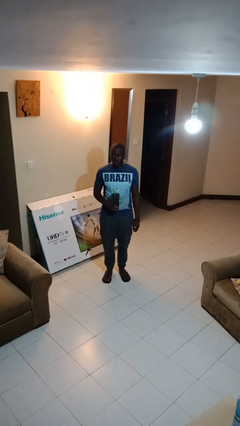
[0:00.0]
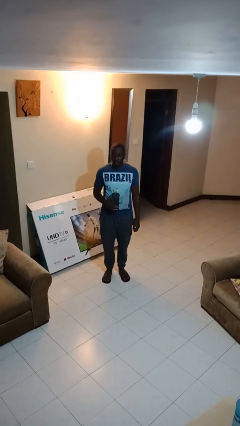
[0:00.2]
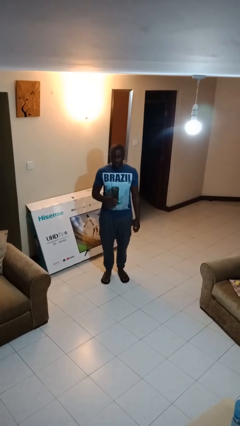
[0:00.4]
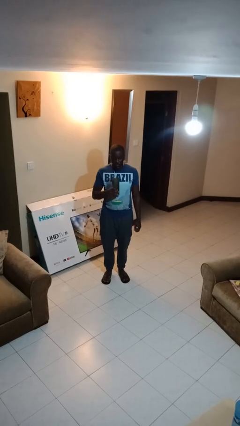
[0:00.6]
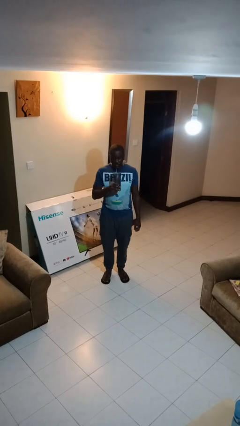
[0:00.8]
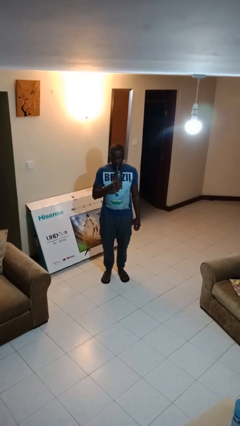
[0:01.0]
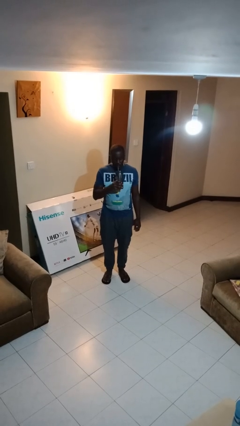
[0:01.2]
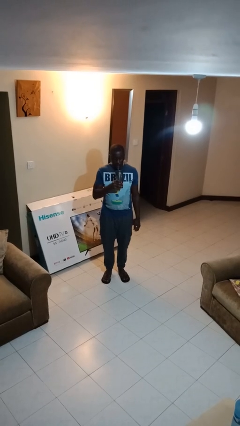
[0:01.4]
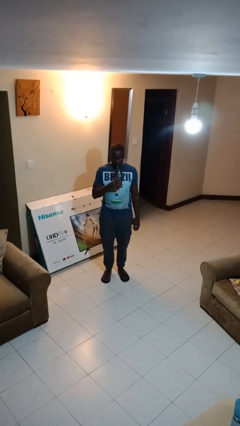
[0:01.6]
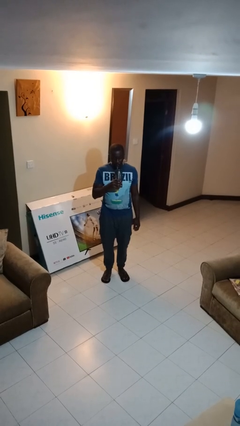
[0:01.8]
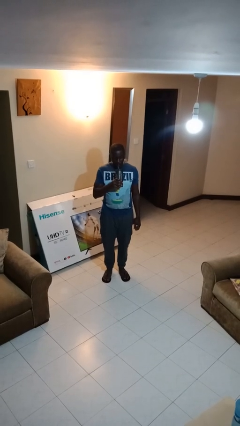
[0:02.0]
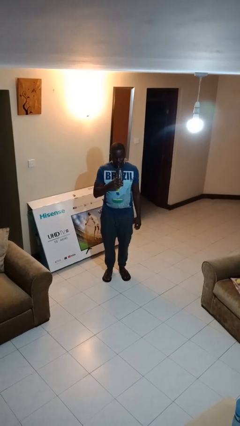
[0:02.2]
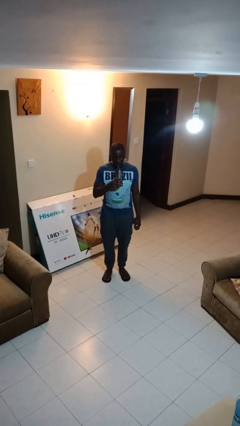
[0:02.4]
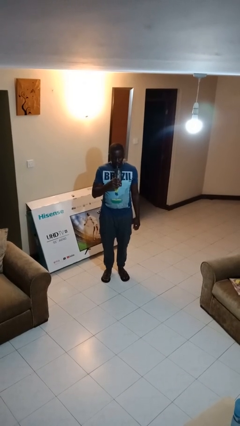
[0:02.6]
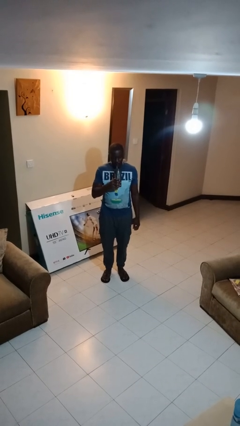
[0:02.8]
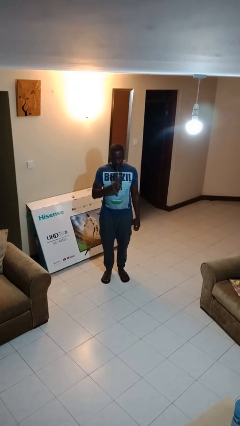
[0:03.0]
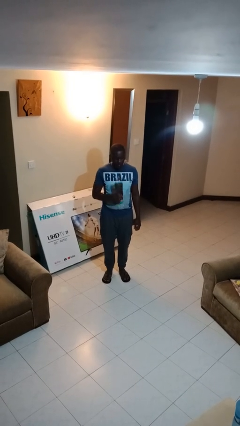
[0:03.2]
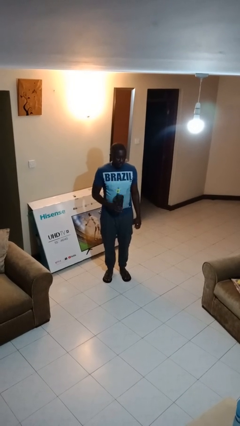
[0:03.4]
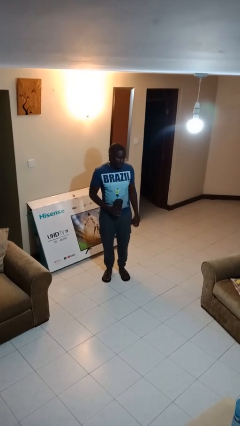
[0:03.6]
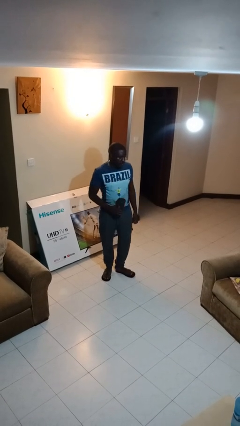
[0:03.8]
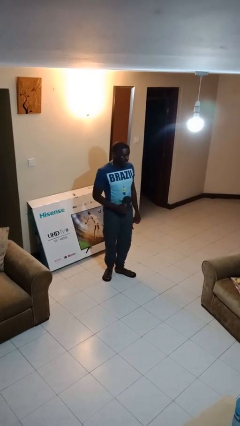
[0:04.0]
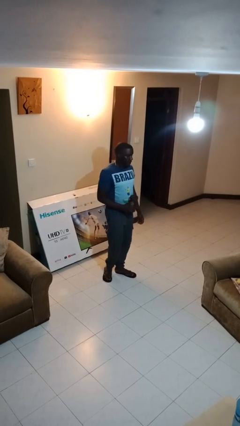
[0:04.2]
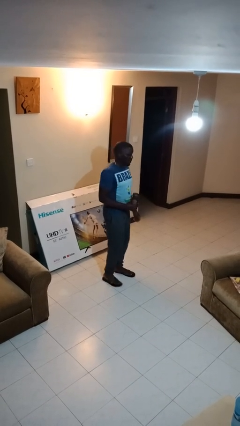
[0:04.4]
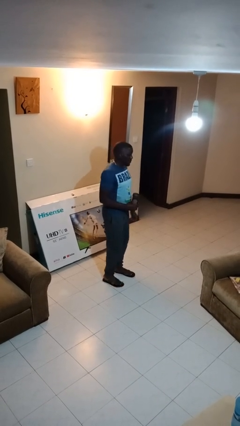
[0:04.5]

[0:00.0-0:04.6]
person drinks from straw

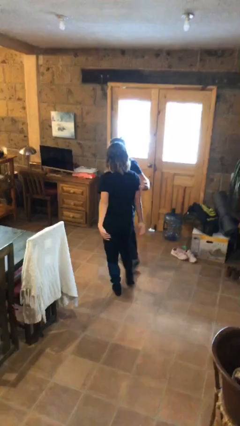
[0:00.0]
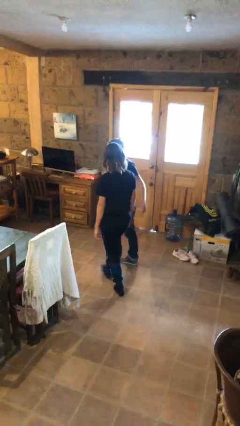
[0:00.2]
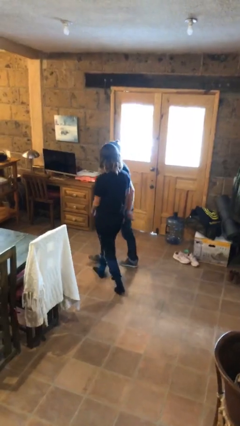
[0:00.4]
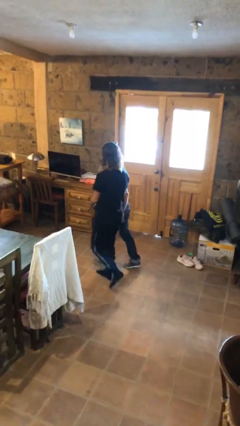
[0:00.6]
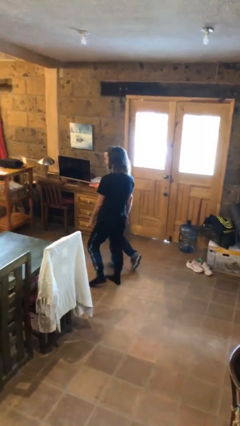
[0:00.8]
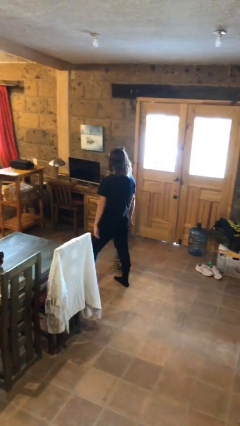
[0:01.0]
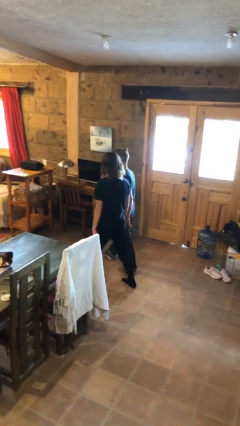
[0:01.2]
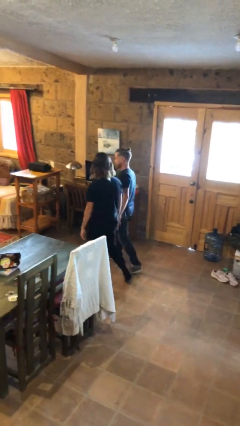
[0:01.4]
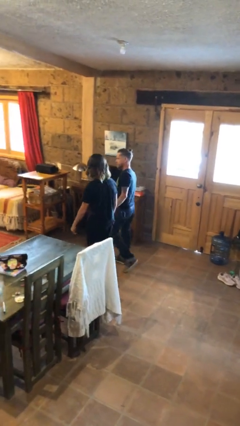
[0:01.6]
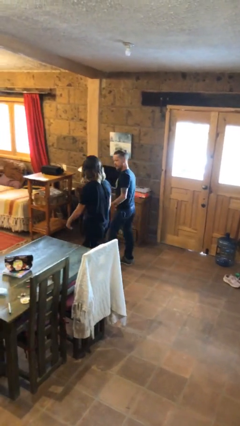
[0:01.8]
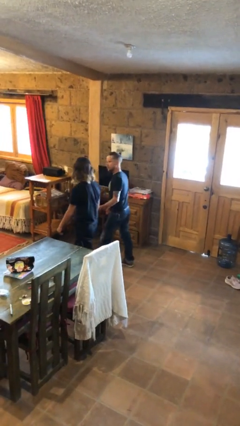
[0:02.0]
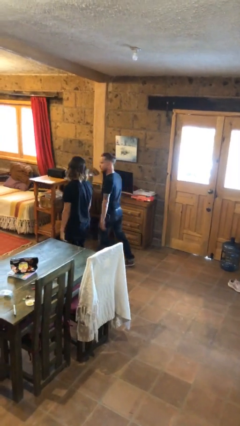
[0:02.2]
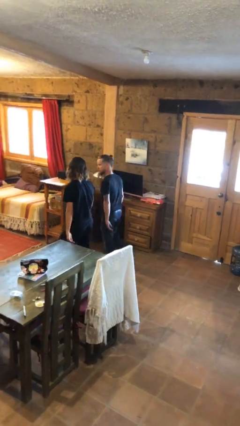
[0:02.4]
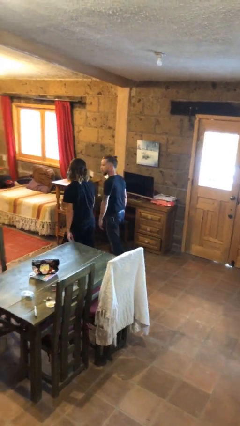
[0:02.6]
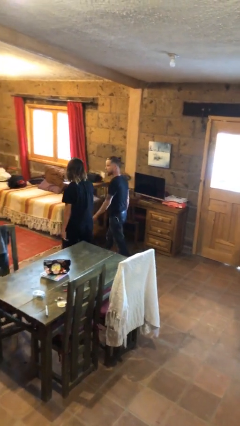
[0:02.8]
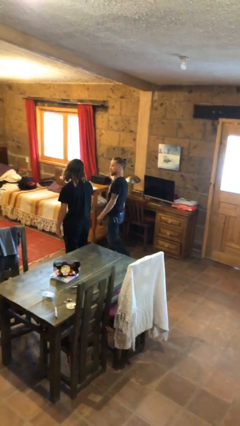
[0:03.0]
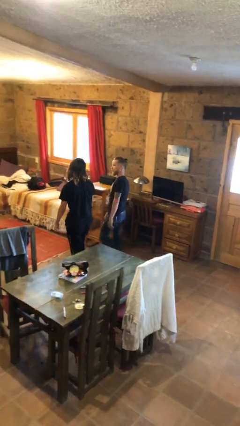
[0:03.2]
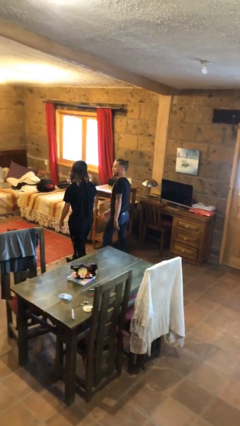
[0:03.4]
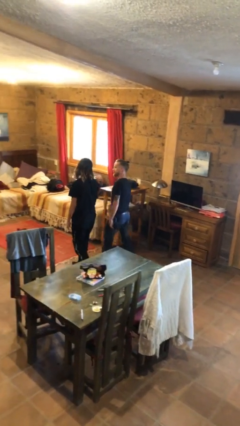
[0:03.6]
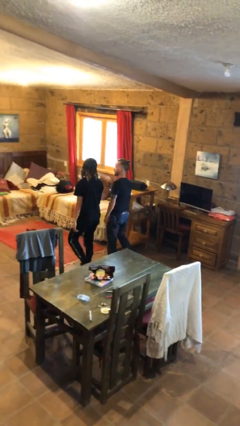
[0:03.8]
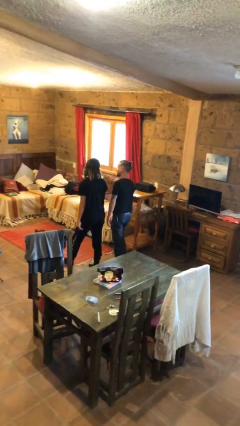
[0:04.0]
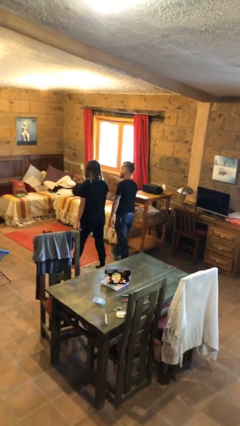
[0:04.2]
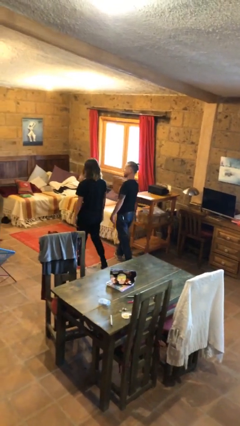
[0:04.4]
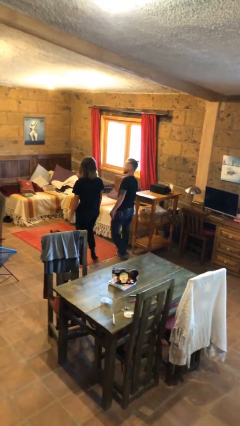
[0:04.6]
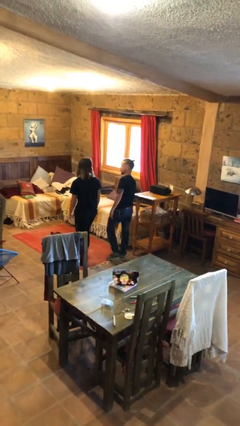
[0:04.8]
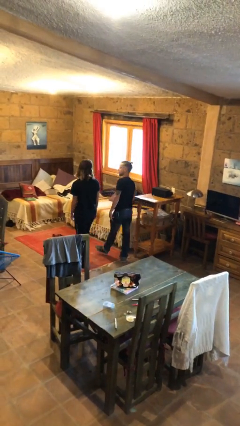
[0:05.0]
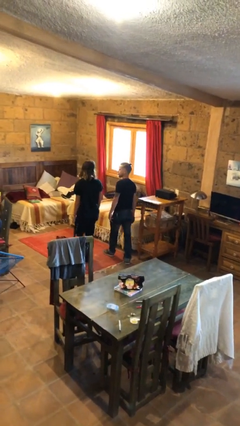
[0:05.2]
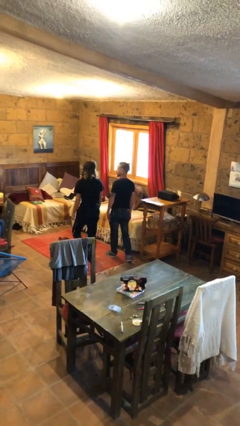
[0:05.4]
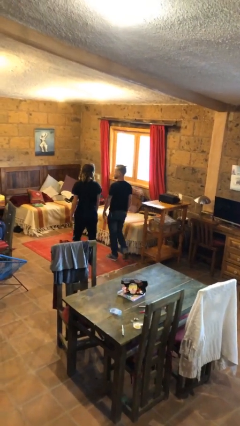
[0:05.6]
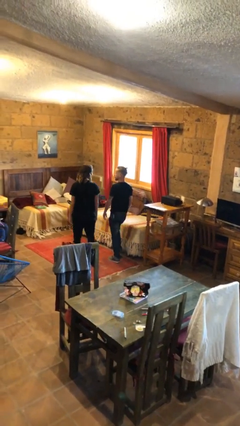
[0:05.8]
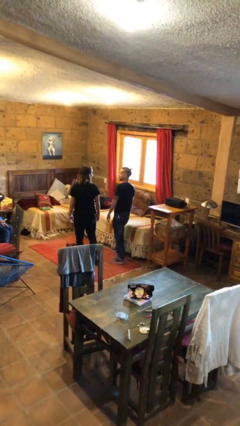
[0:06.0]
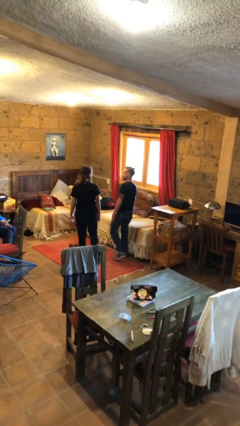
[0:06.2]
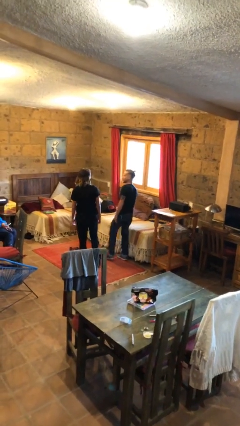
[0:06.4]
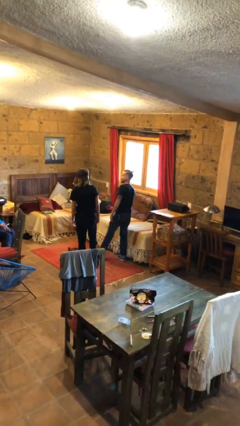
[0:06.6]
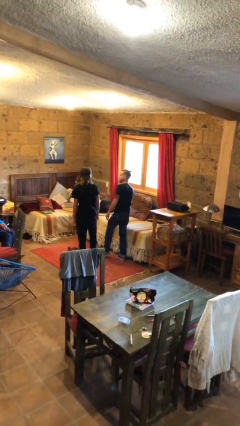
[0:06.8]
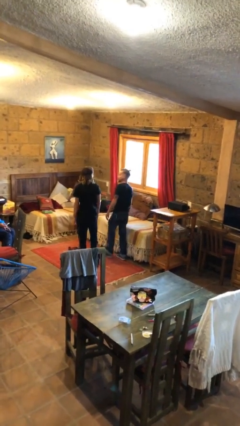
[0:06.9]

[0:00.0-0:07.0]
person talks to person

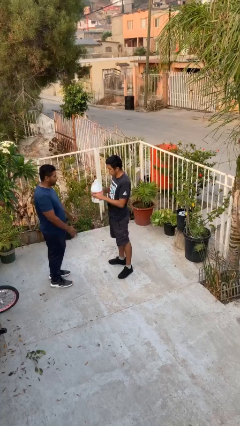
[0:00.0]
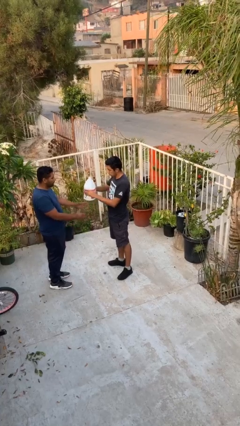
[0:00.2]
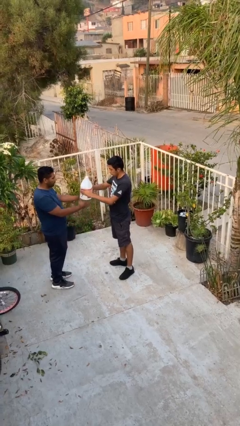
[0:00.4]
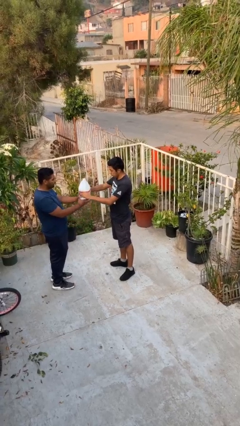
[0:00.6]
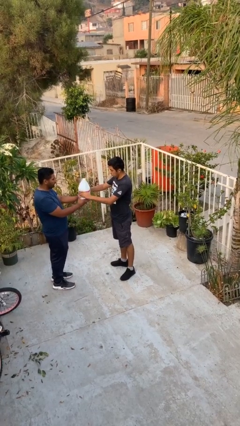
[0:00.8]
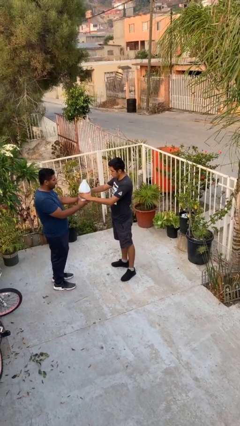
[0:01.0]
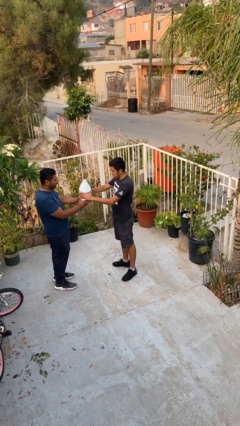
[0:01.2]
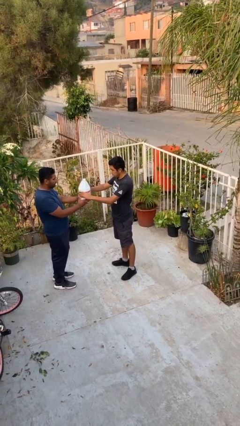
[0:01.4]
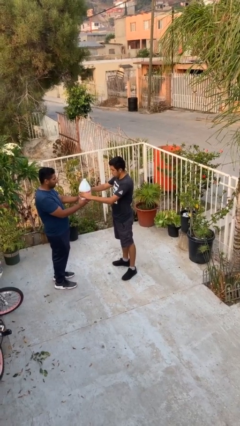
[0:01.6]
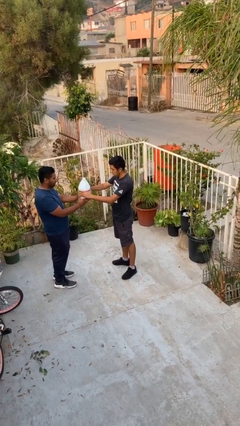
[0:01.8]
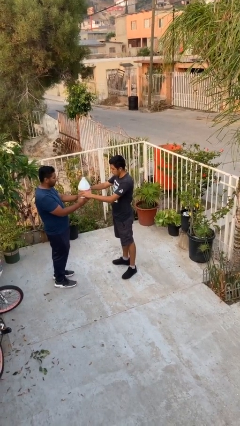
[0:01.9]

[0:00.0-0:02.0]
person transfers object to person

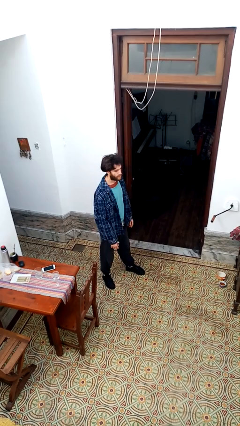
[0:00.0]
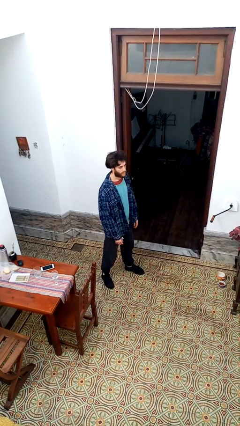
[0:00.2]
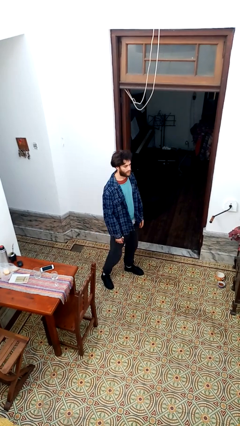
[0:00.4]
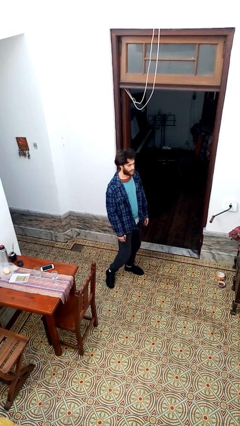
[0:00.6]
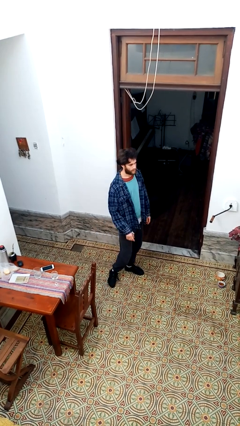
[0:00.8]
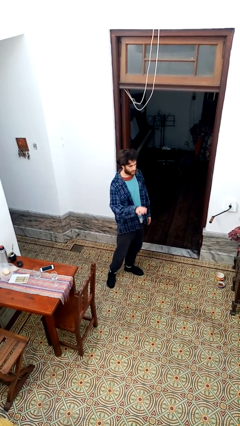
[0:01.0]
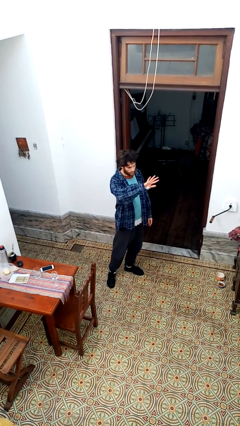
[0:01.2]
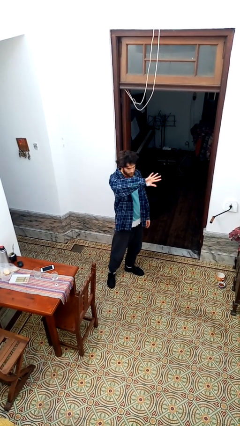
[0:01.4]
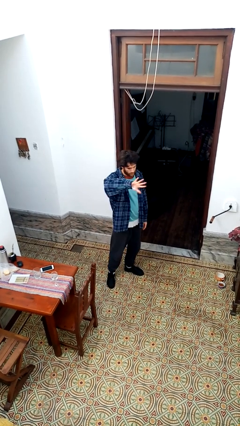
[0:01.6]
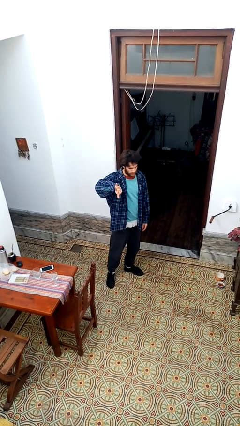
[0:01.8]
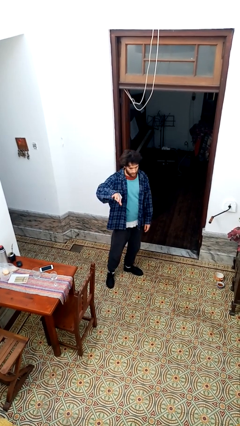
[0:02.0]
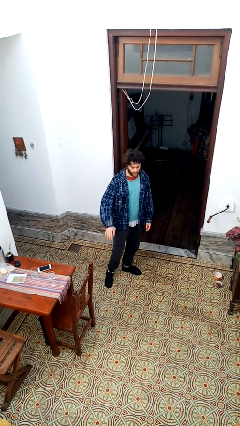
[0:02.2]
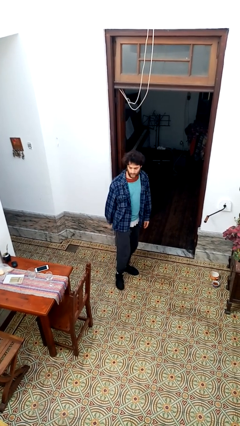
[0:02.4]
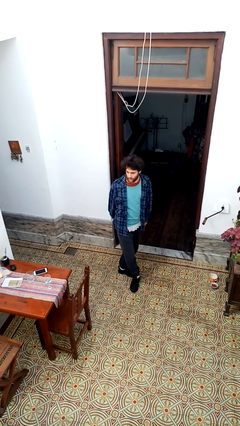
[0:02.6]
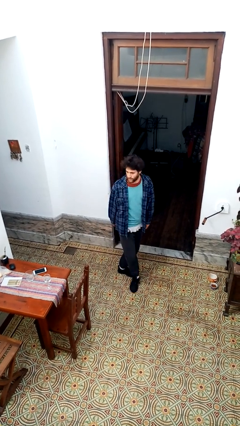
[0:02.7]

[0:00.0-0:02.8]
person gestures swipe right

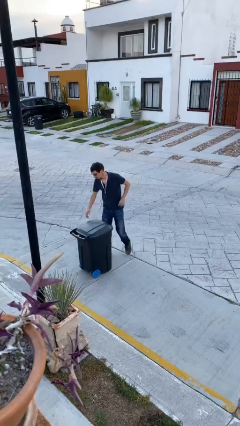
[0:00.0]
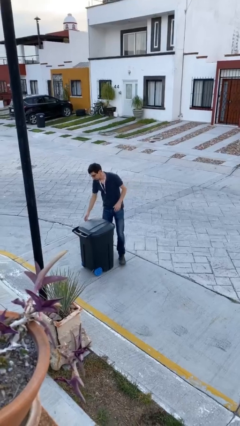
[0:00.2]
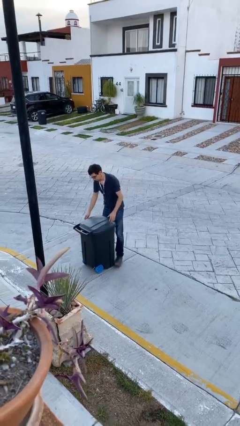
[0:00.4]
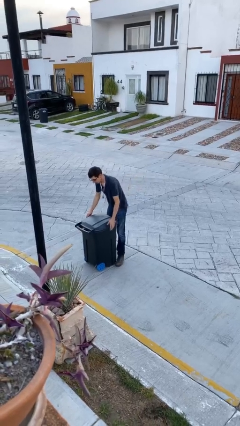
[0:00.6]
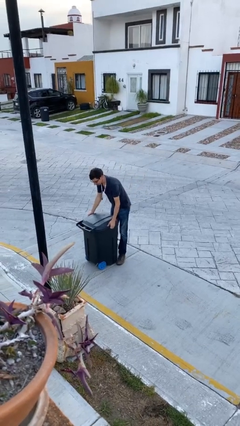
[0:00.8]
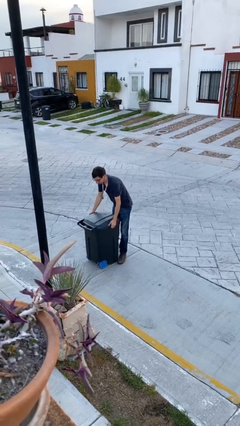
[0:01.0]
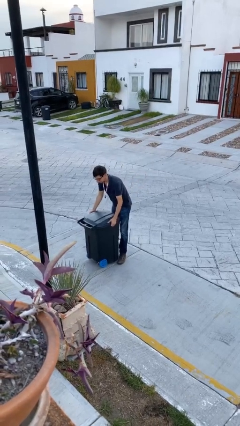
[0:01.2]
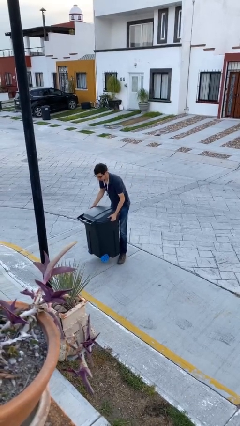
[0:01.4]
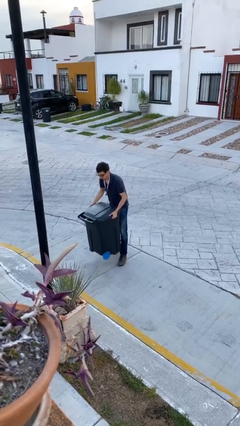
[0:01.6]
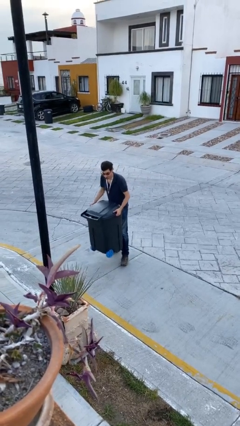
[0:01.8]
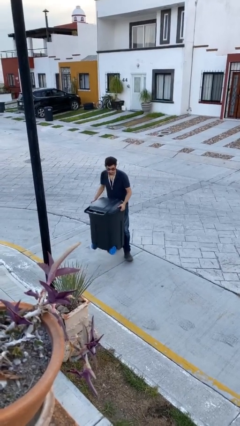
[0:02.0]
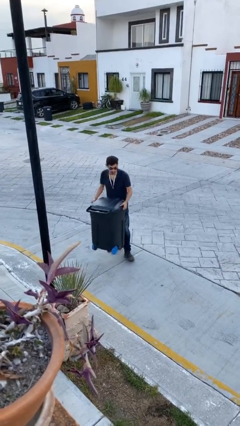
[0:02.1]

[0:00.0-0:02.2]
person picks up object from floor
